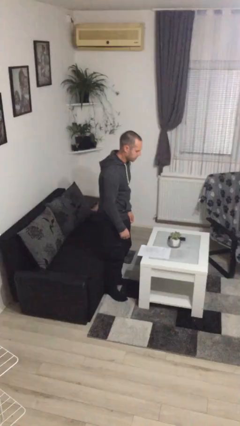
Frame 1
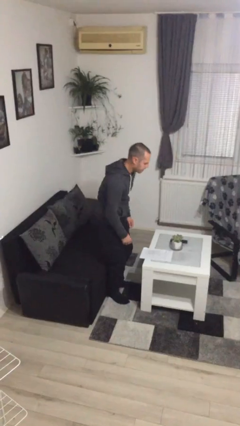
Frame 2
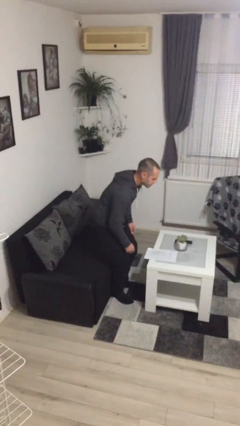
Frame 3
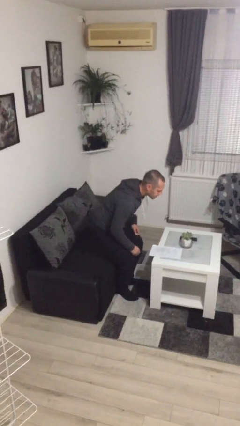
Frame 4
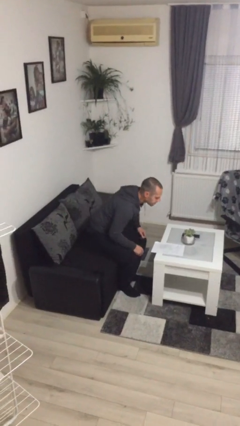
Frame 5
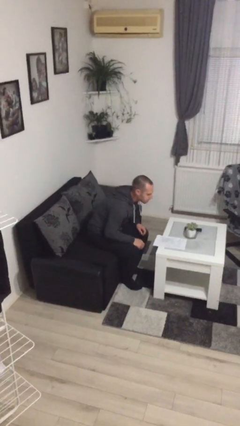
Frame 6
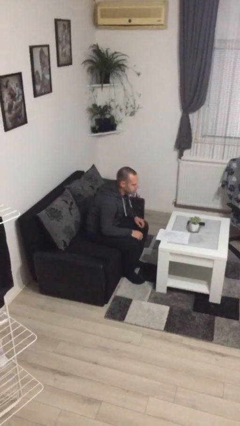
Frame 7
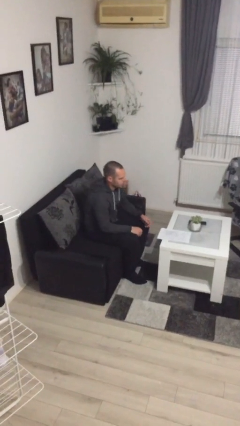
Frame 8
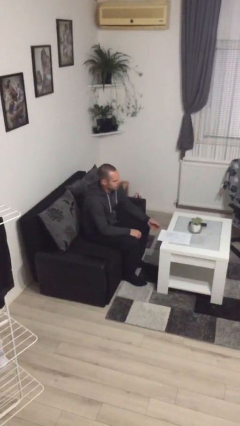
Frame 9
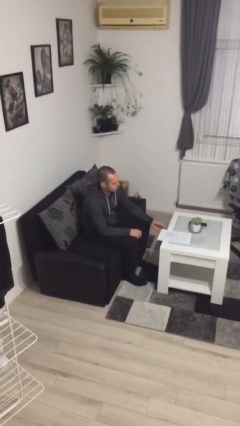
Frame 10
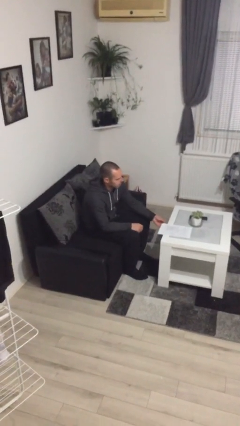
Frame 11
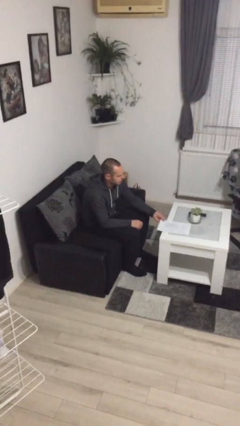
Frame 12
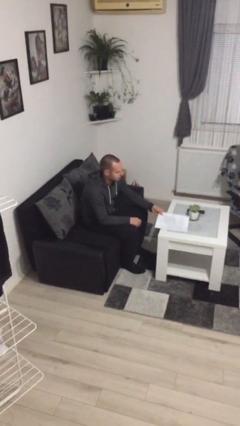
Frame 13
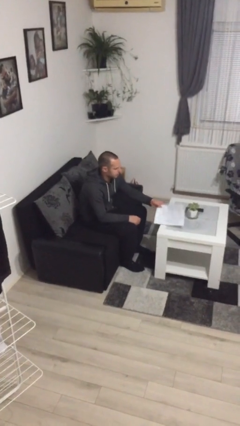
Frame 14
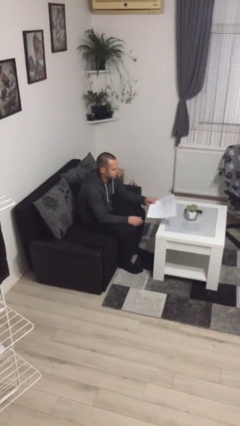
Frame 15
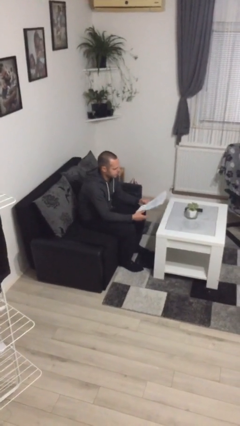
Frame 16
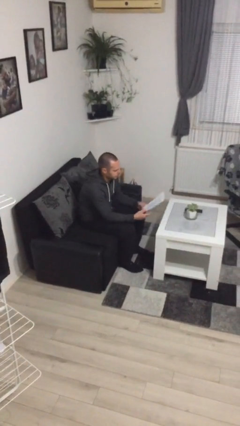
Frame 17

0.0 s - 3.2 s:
person sits down

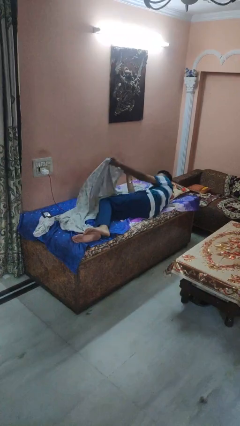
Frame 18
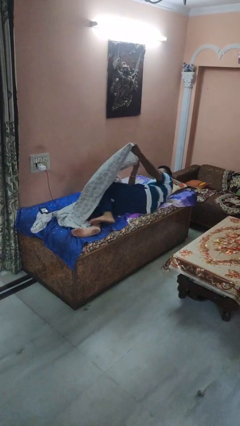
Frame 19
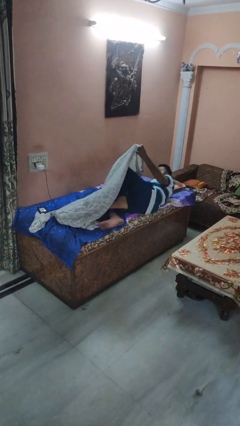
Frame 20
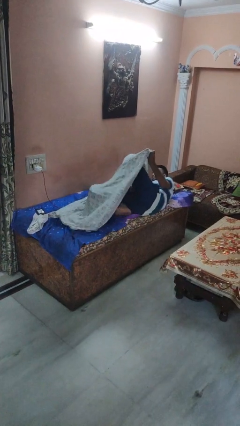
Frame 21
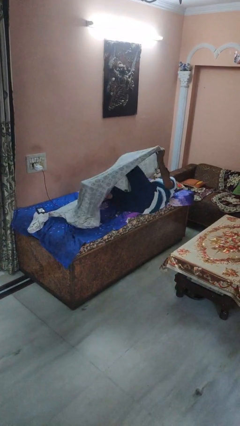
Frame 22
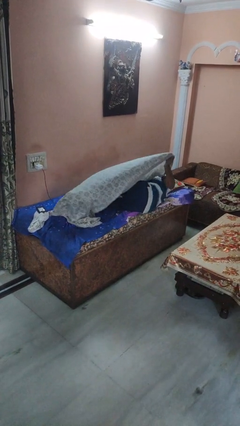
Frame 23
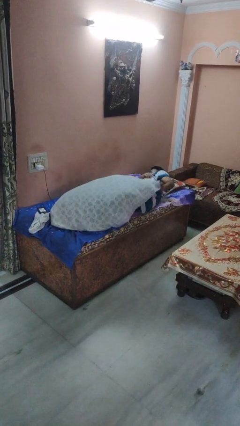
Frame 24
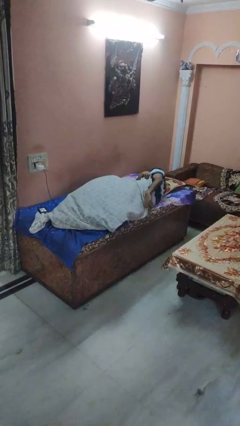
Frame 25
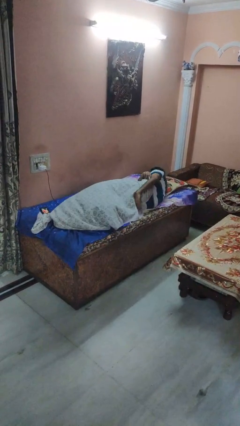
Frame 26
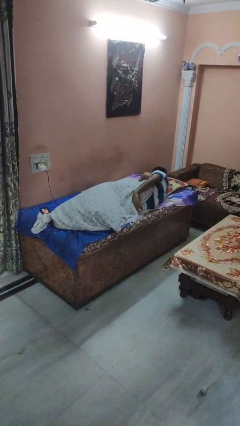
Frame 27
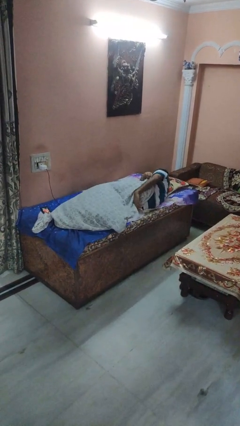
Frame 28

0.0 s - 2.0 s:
person covers with bedsheets

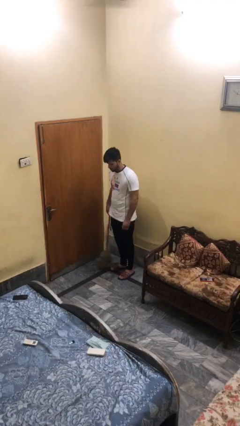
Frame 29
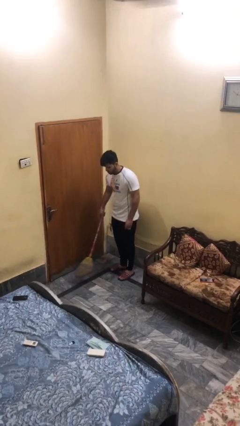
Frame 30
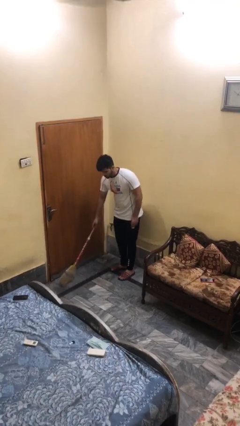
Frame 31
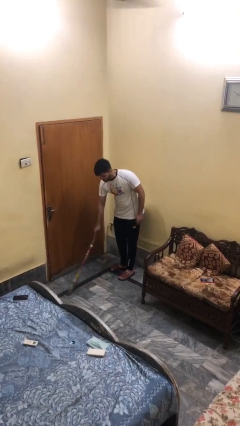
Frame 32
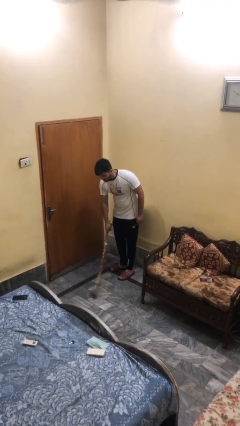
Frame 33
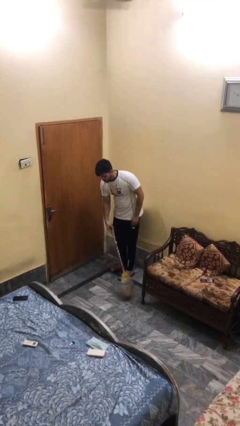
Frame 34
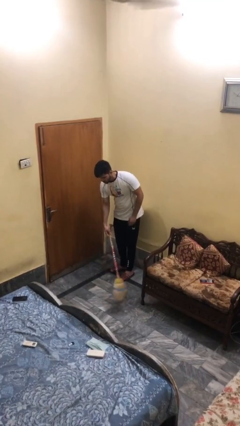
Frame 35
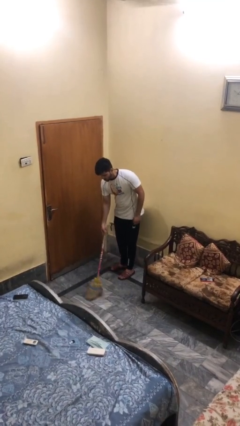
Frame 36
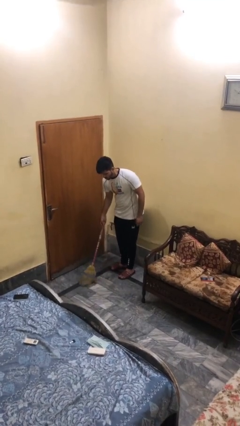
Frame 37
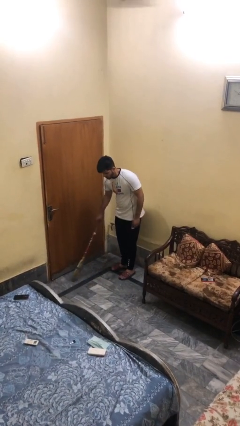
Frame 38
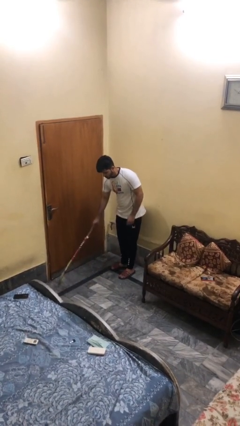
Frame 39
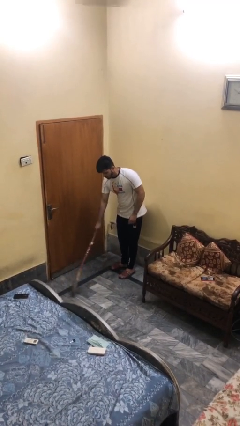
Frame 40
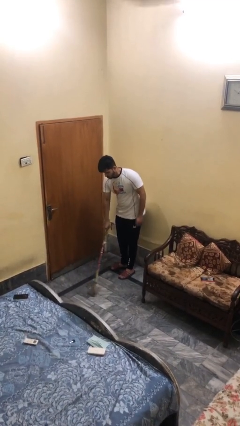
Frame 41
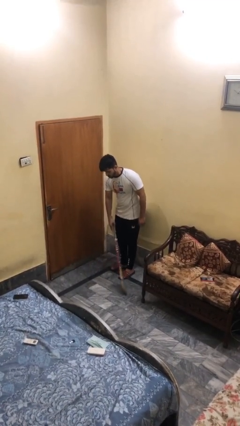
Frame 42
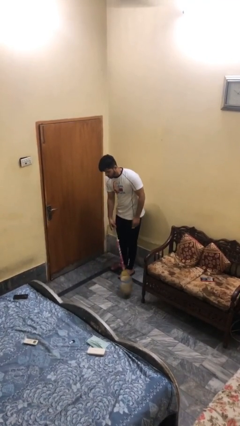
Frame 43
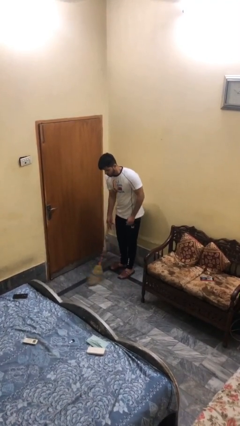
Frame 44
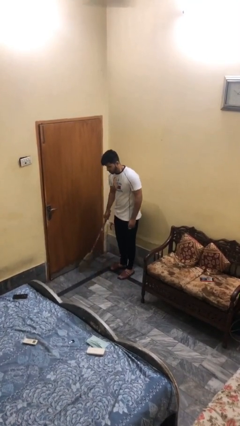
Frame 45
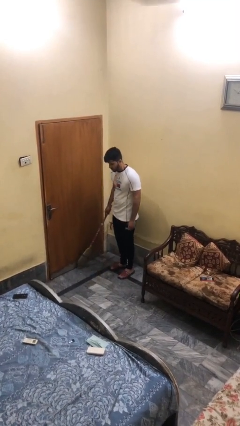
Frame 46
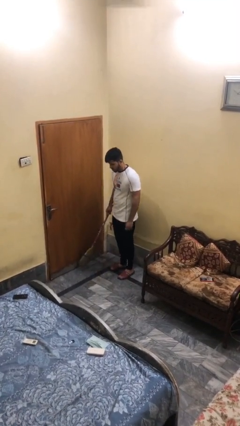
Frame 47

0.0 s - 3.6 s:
person sweeps floor

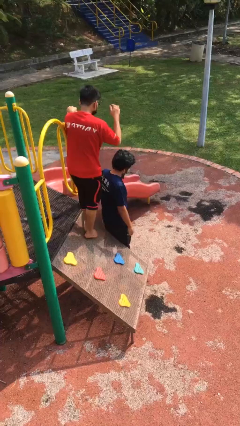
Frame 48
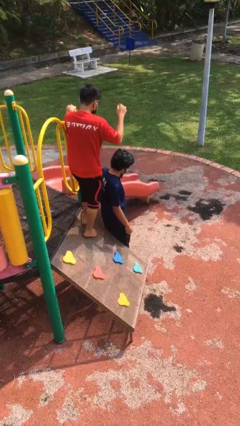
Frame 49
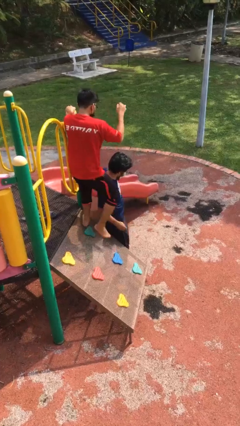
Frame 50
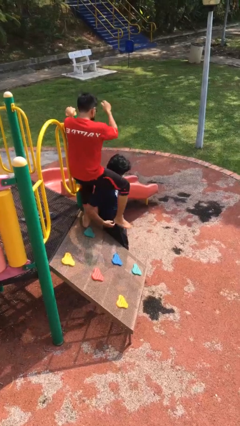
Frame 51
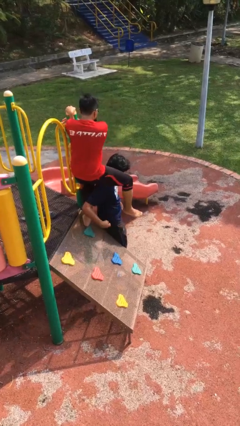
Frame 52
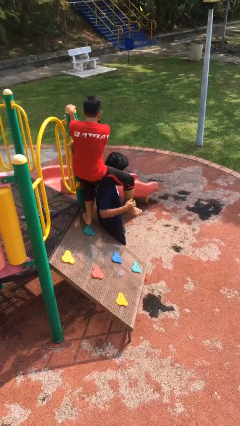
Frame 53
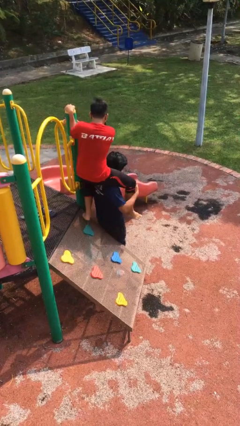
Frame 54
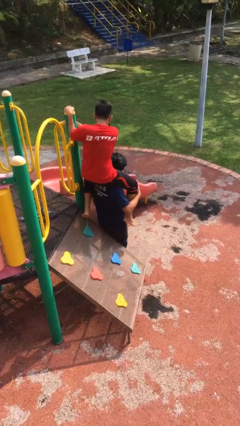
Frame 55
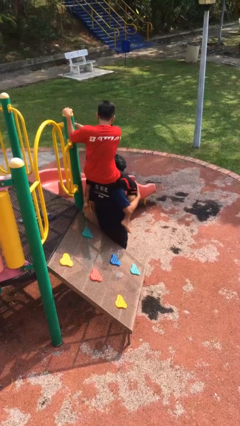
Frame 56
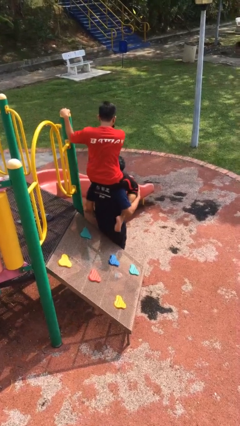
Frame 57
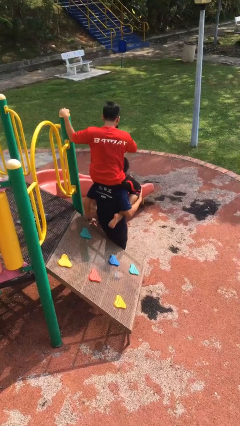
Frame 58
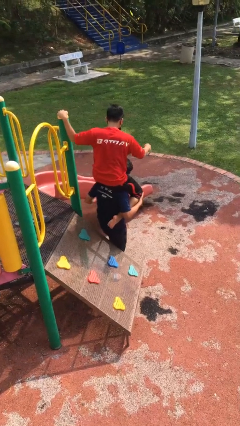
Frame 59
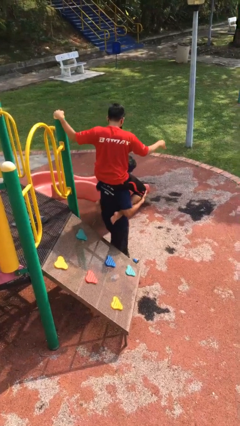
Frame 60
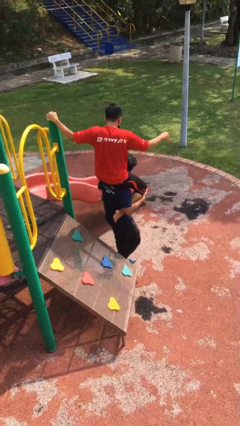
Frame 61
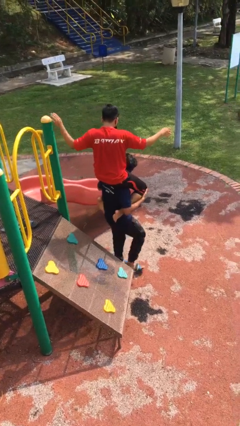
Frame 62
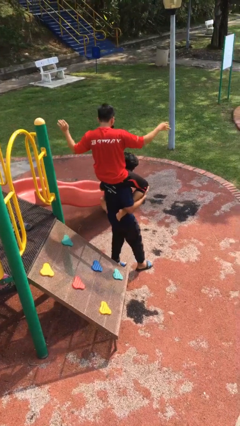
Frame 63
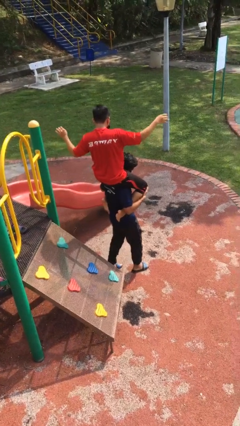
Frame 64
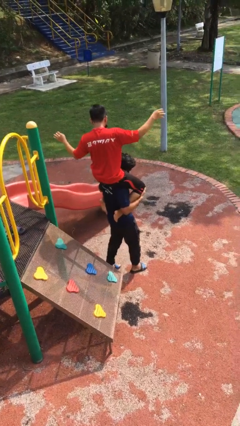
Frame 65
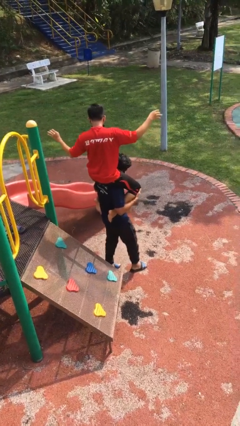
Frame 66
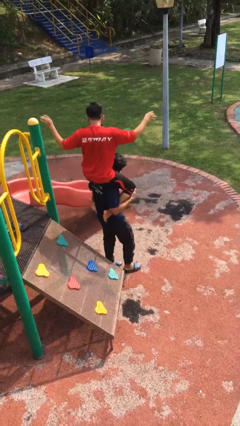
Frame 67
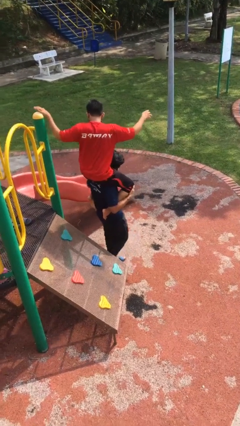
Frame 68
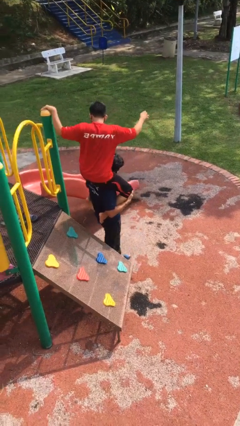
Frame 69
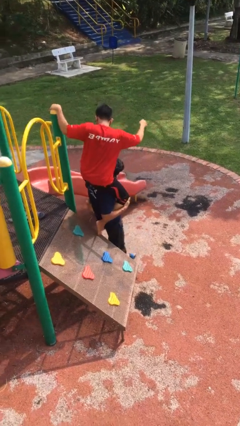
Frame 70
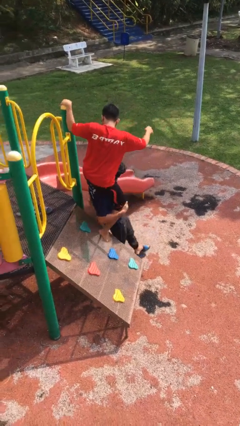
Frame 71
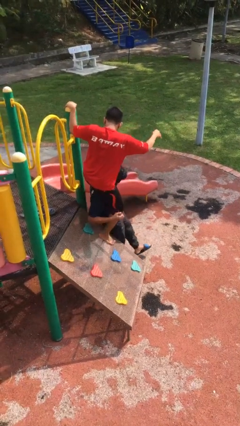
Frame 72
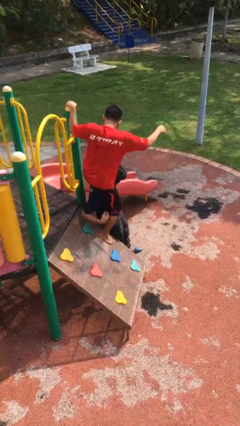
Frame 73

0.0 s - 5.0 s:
person carries person on shoulders

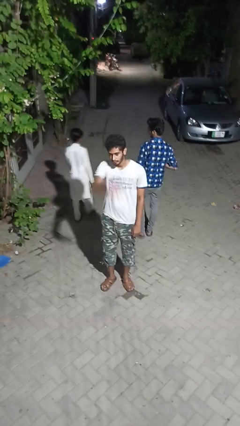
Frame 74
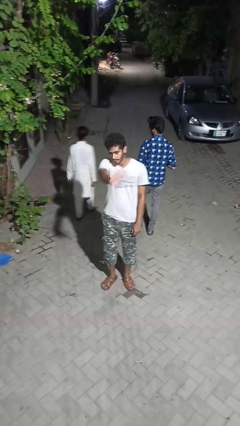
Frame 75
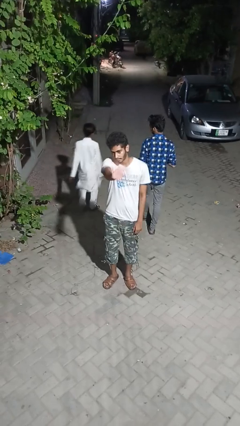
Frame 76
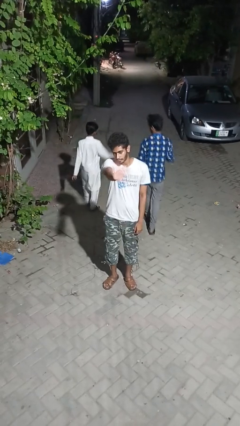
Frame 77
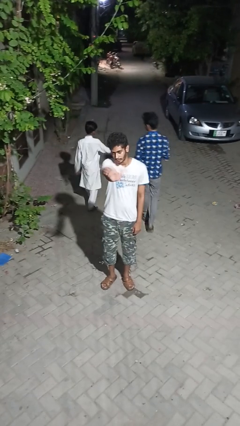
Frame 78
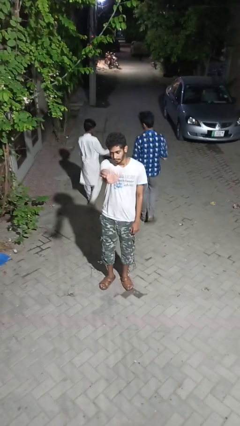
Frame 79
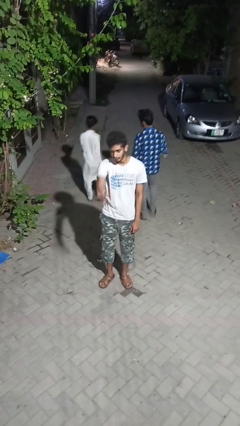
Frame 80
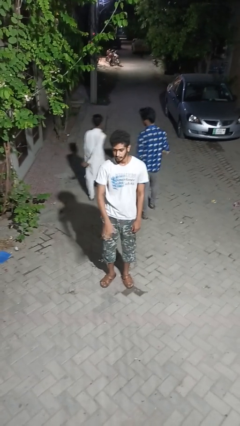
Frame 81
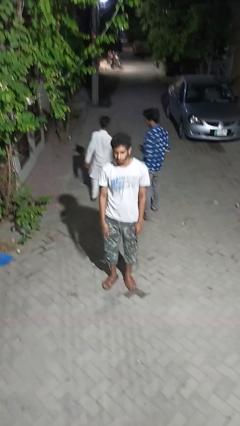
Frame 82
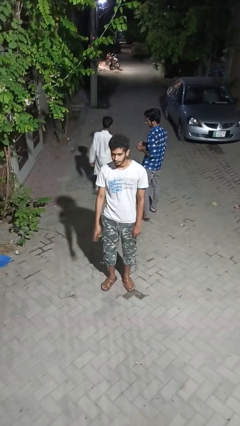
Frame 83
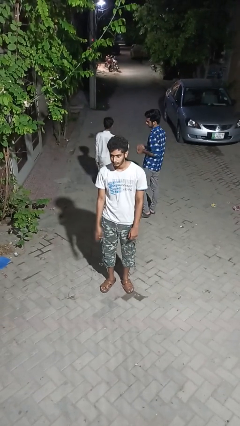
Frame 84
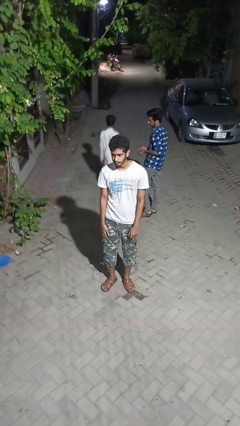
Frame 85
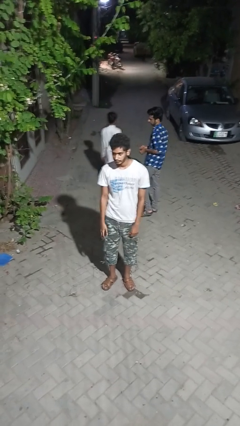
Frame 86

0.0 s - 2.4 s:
person waves at person

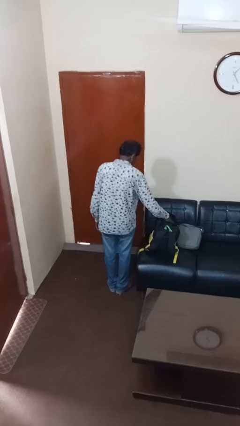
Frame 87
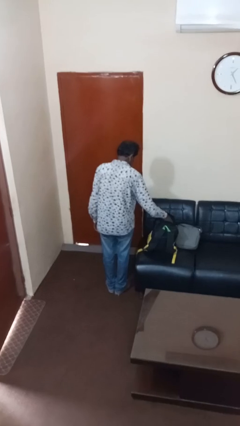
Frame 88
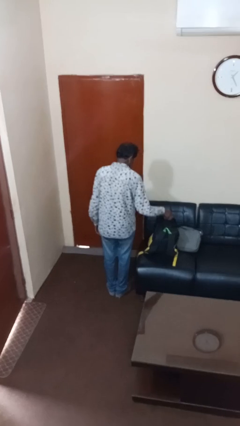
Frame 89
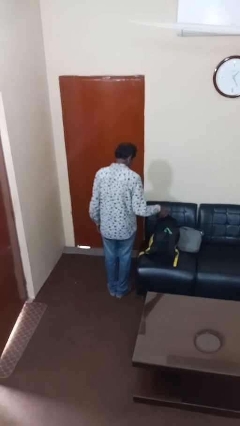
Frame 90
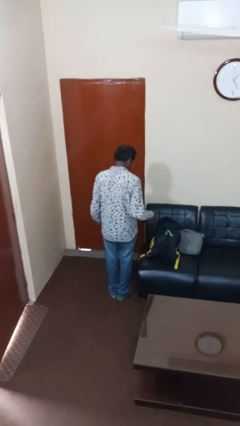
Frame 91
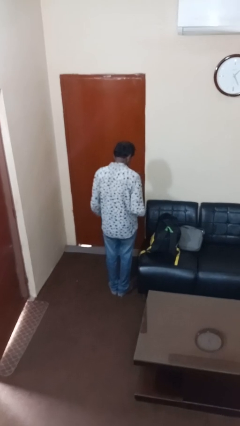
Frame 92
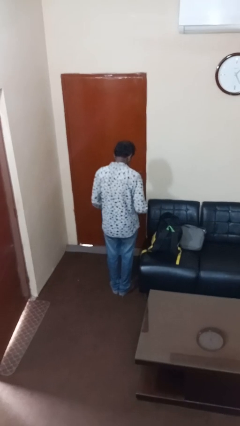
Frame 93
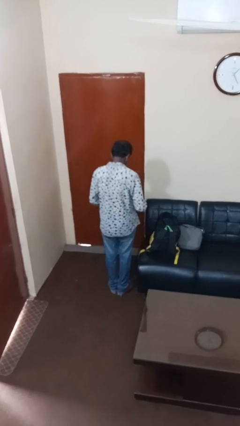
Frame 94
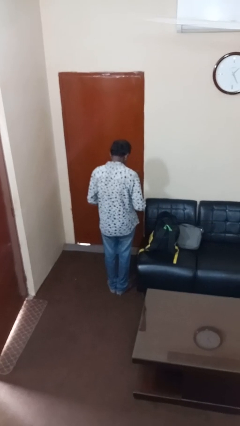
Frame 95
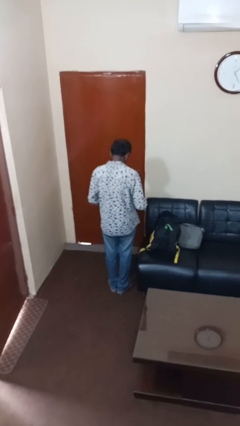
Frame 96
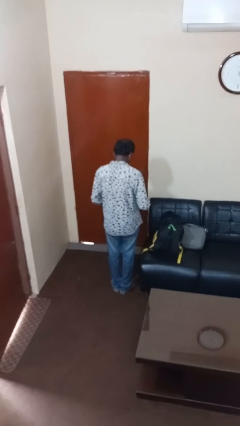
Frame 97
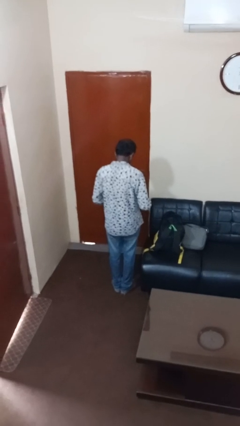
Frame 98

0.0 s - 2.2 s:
person takes object from backpack
